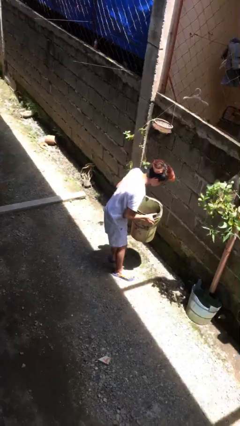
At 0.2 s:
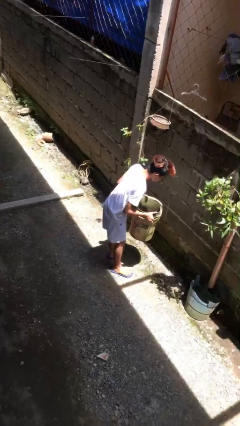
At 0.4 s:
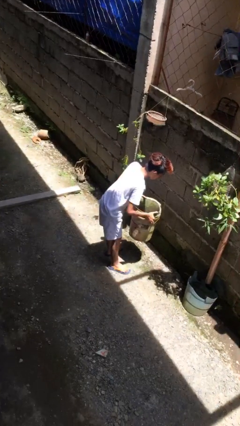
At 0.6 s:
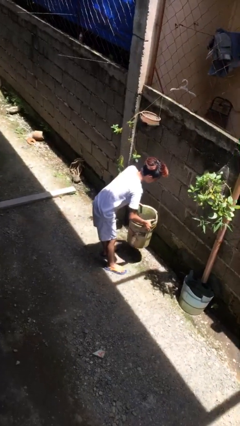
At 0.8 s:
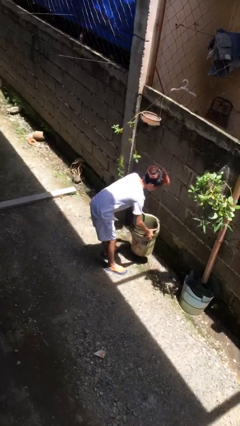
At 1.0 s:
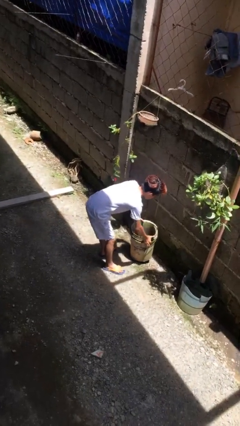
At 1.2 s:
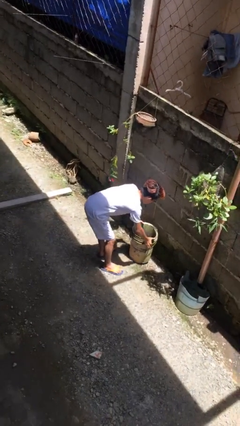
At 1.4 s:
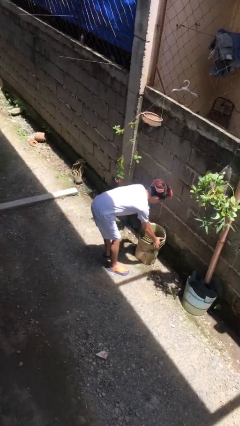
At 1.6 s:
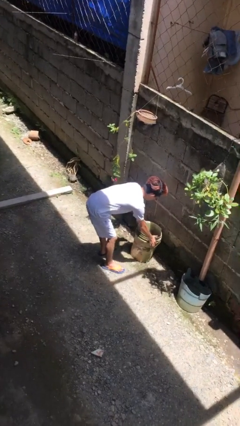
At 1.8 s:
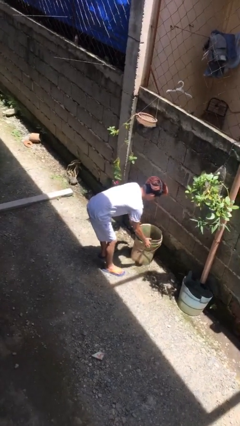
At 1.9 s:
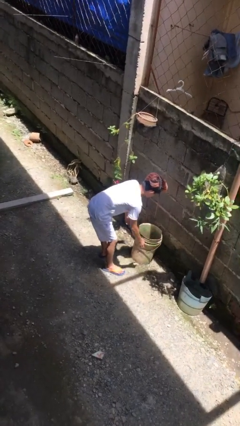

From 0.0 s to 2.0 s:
person puts down object on floor

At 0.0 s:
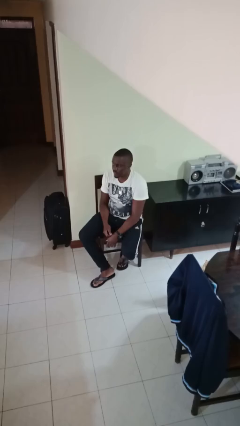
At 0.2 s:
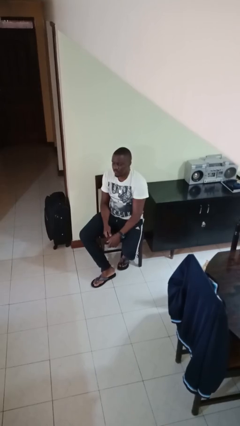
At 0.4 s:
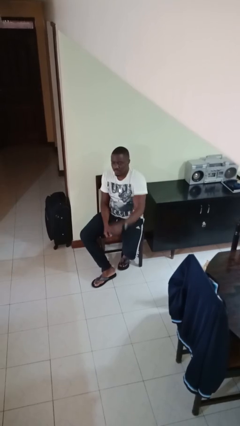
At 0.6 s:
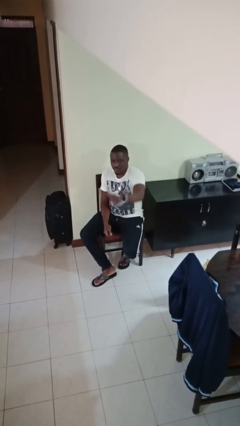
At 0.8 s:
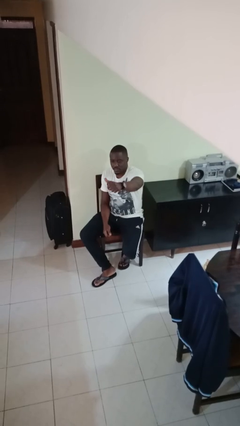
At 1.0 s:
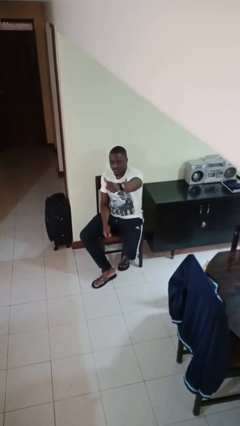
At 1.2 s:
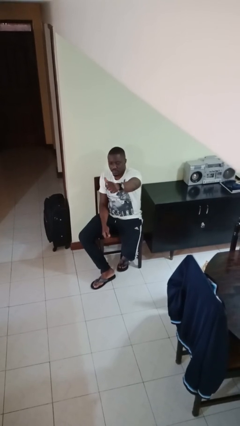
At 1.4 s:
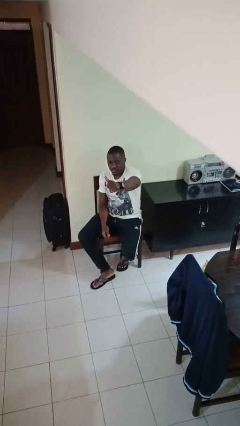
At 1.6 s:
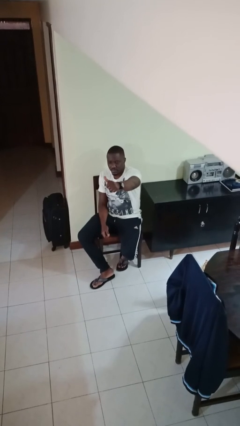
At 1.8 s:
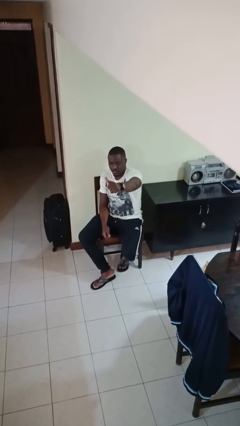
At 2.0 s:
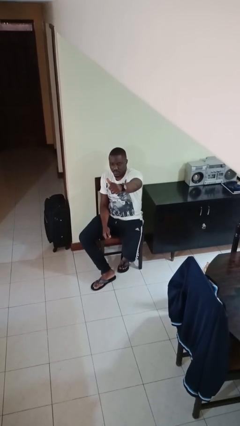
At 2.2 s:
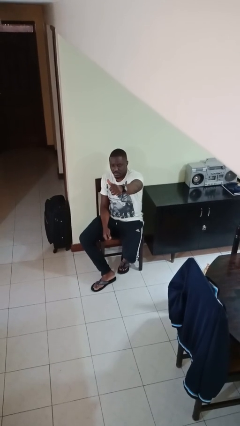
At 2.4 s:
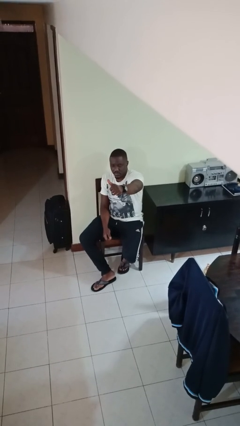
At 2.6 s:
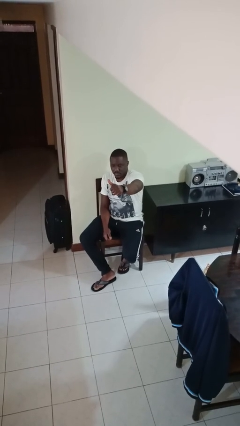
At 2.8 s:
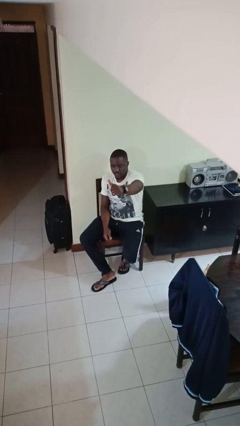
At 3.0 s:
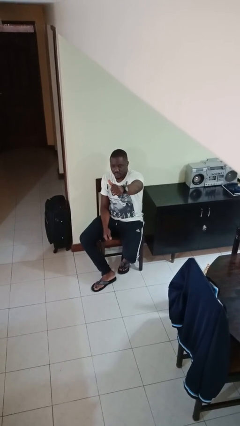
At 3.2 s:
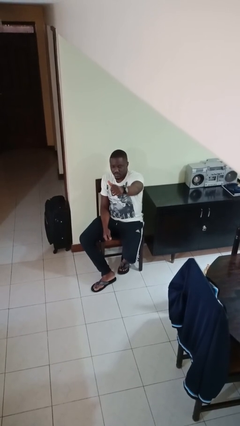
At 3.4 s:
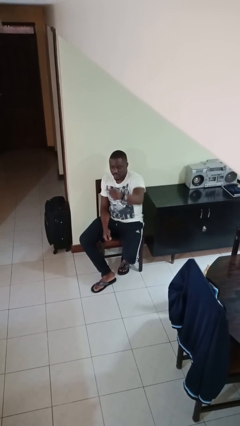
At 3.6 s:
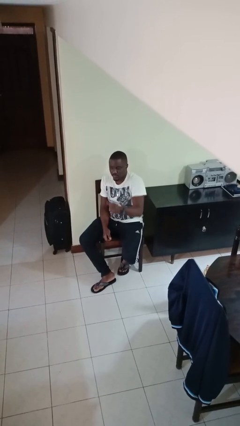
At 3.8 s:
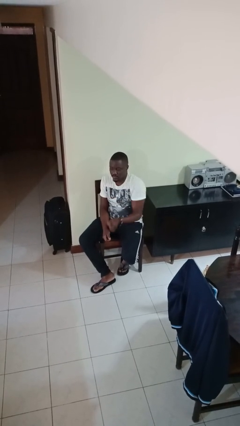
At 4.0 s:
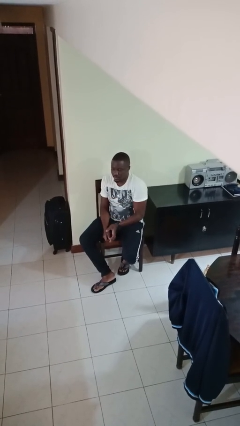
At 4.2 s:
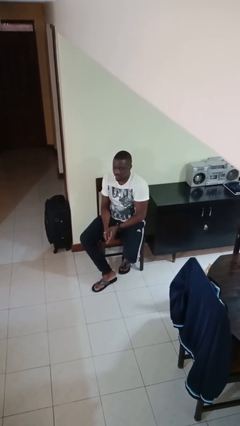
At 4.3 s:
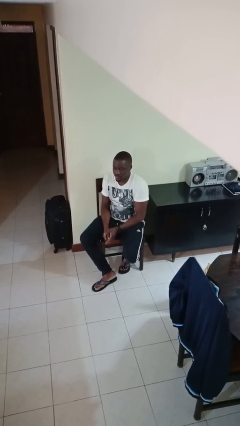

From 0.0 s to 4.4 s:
person gestures thumbs up

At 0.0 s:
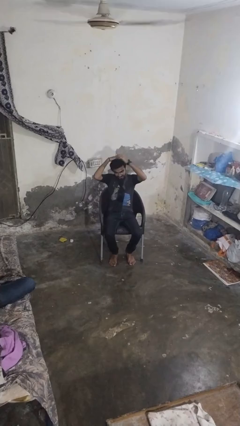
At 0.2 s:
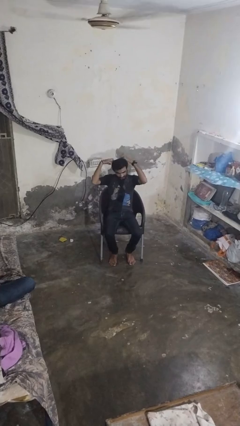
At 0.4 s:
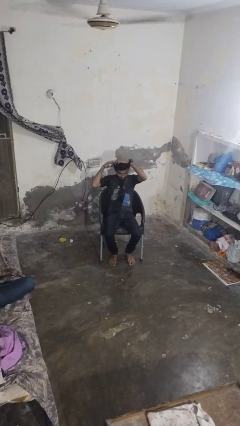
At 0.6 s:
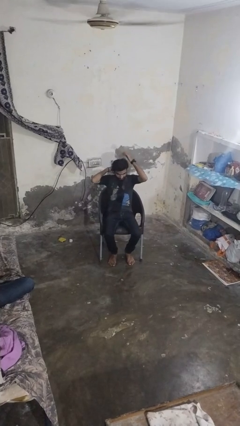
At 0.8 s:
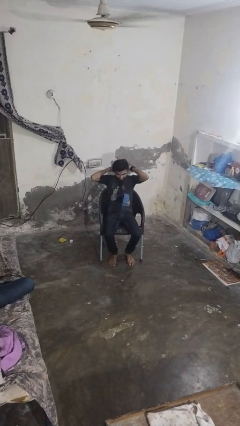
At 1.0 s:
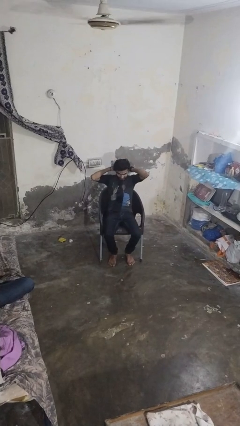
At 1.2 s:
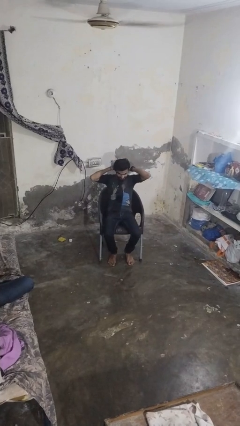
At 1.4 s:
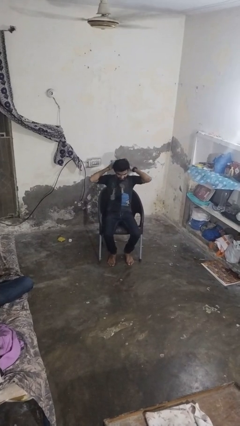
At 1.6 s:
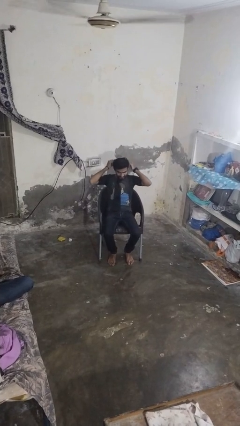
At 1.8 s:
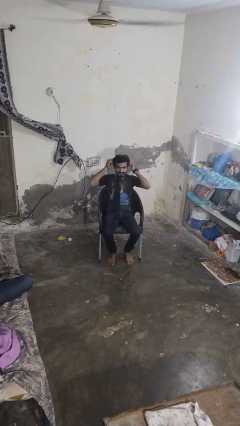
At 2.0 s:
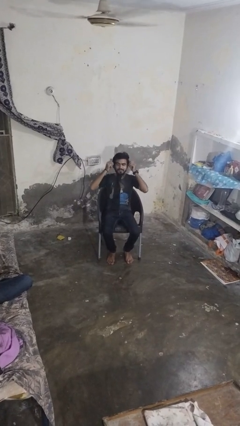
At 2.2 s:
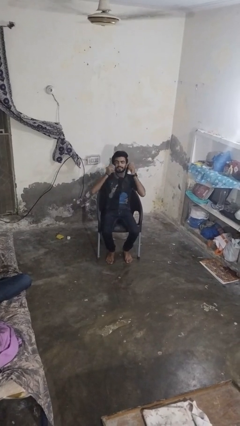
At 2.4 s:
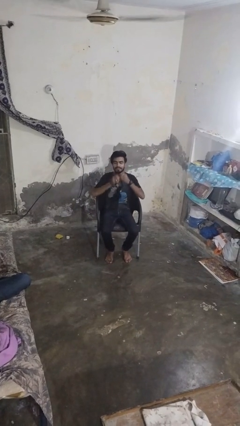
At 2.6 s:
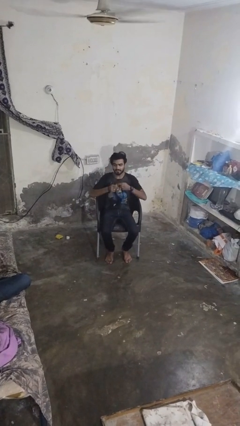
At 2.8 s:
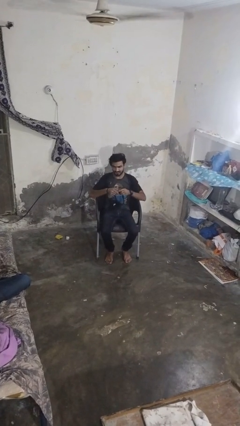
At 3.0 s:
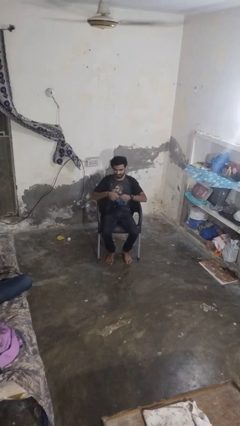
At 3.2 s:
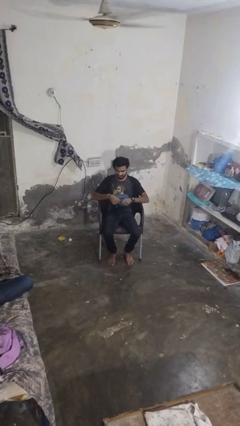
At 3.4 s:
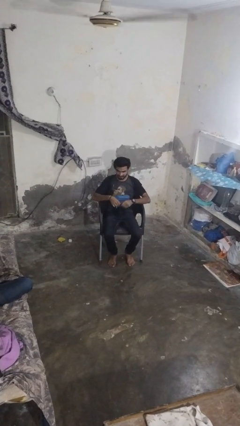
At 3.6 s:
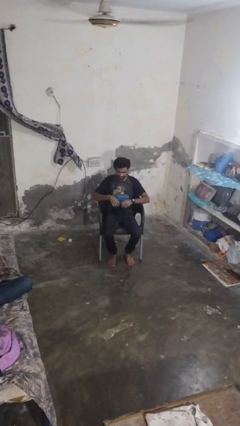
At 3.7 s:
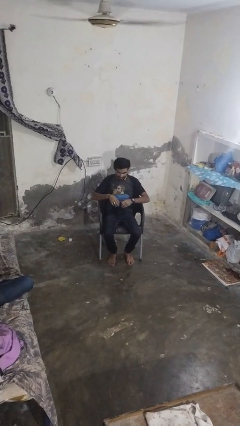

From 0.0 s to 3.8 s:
person takes off necktie

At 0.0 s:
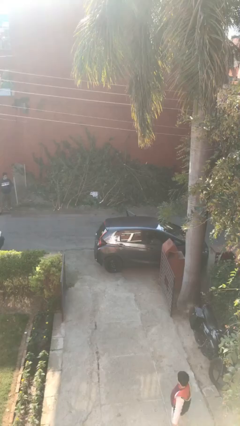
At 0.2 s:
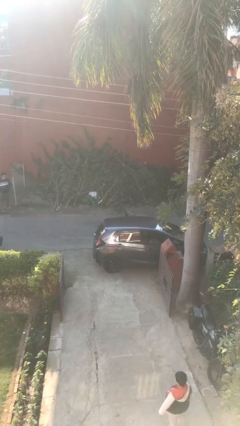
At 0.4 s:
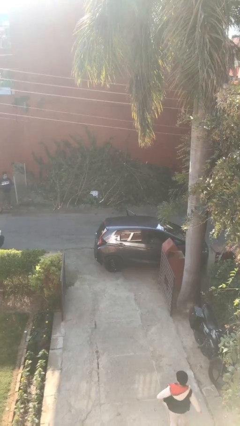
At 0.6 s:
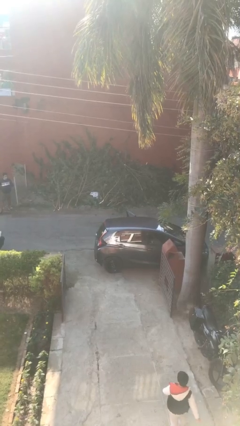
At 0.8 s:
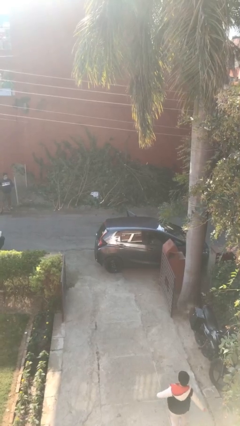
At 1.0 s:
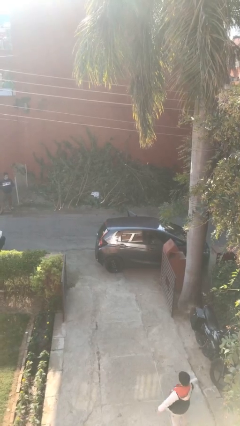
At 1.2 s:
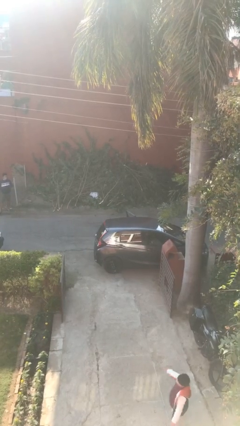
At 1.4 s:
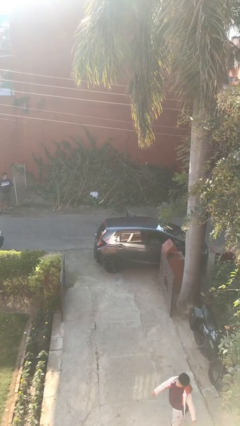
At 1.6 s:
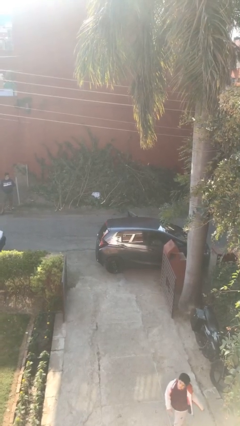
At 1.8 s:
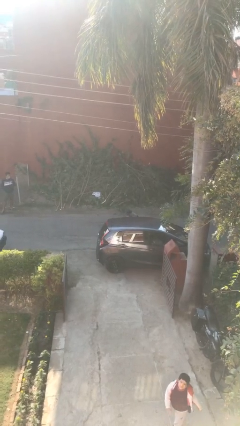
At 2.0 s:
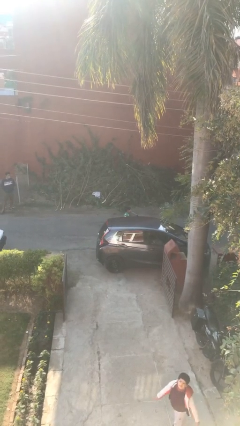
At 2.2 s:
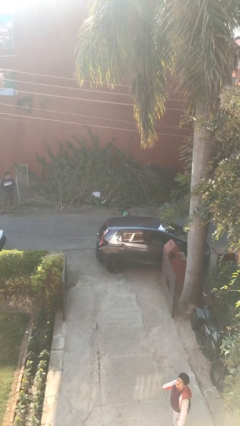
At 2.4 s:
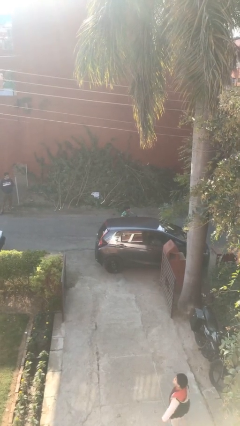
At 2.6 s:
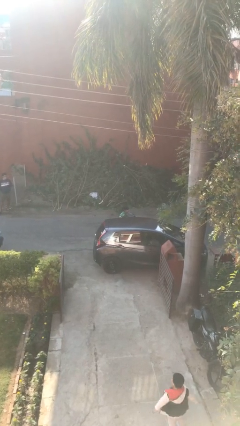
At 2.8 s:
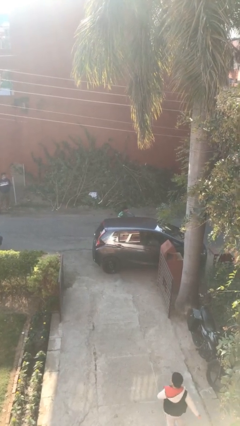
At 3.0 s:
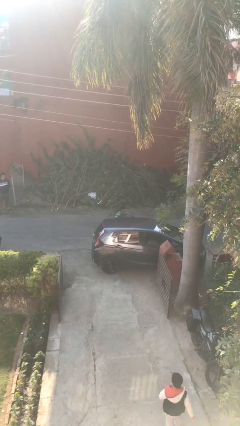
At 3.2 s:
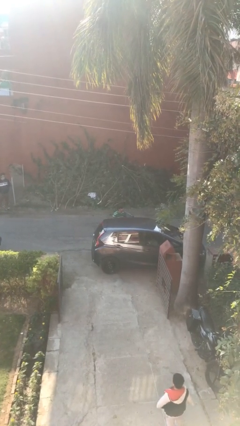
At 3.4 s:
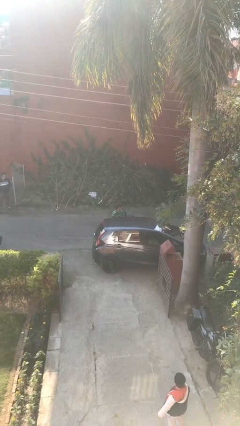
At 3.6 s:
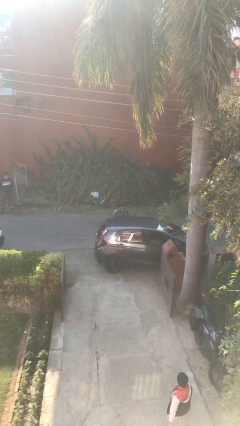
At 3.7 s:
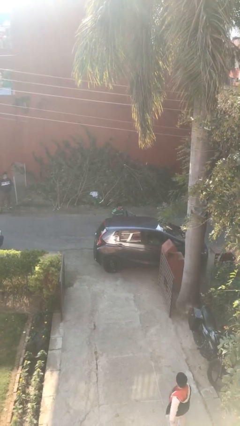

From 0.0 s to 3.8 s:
person exits car

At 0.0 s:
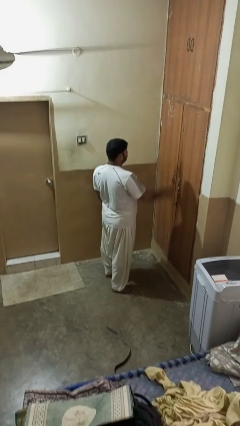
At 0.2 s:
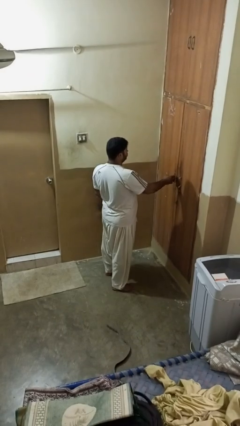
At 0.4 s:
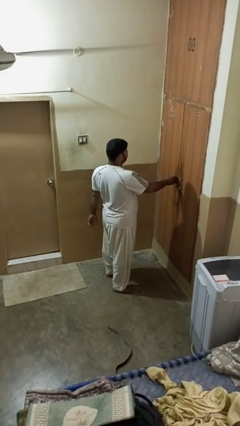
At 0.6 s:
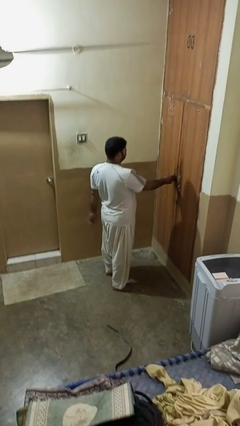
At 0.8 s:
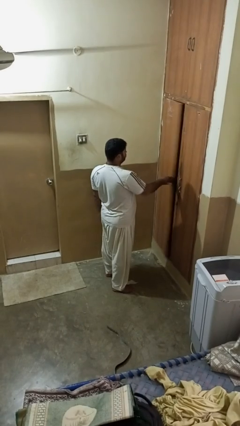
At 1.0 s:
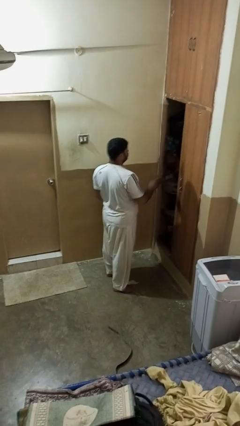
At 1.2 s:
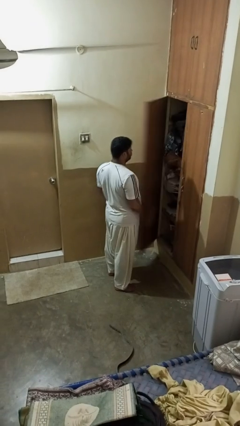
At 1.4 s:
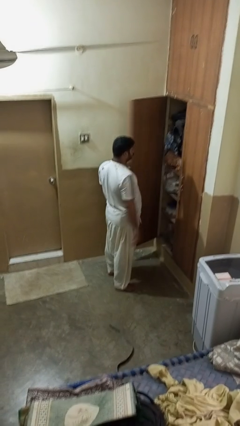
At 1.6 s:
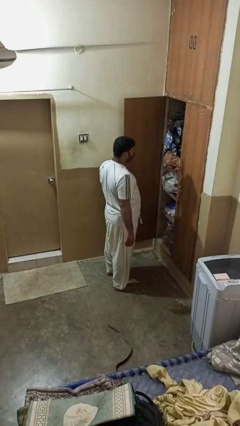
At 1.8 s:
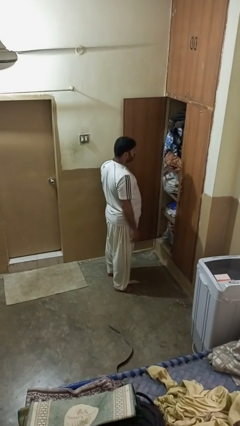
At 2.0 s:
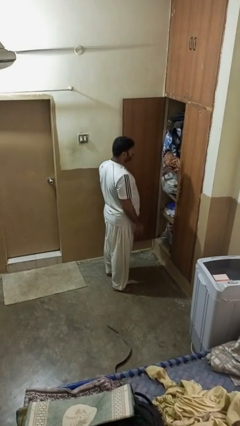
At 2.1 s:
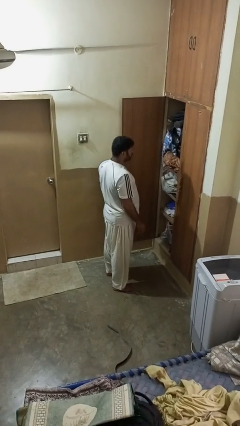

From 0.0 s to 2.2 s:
person opens closet door

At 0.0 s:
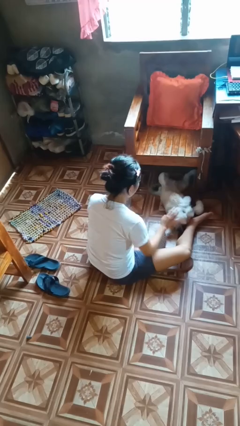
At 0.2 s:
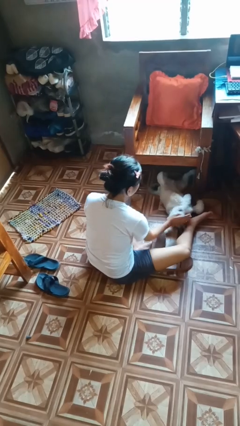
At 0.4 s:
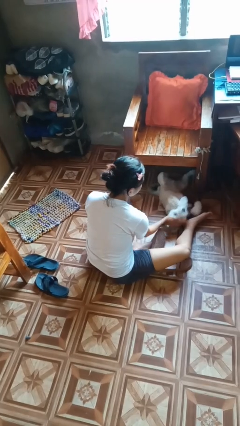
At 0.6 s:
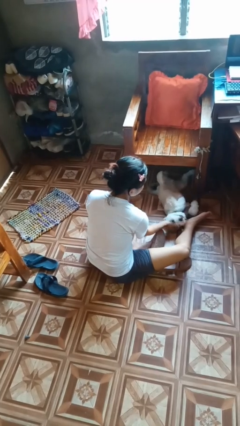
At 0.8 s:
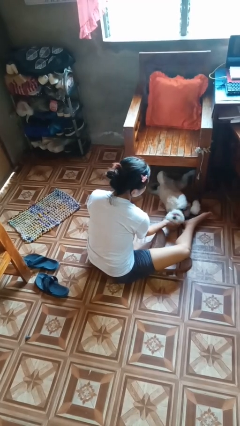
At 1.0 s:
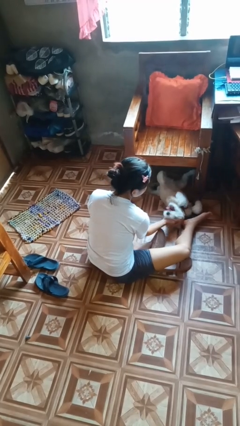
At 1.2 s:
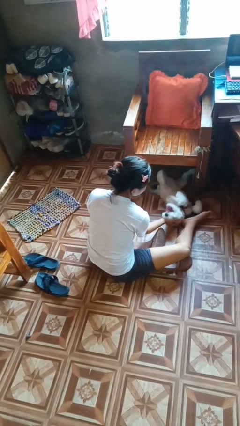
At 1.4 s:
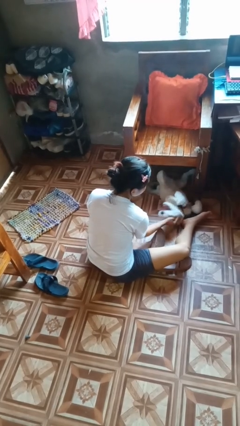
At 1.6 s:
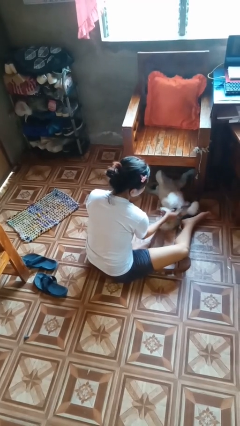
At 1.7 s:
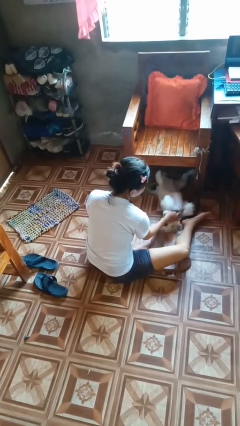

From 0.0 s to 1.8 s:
person pets dog
